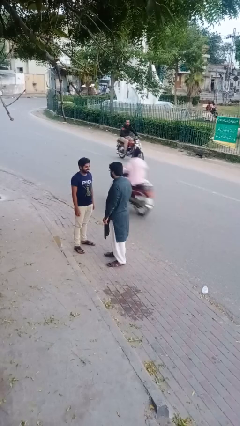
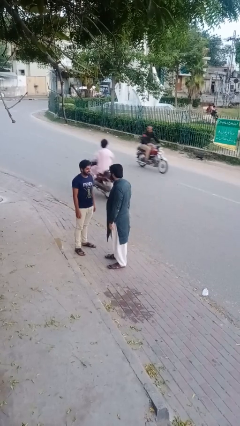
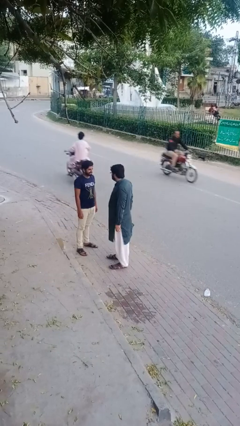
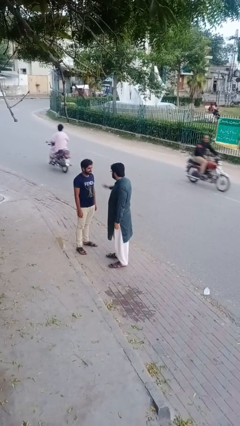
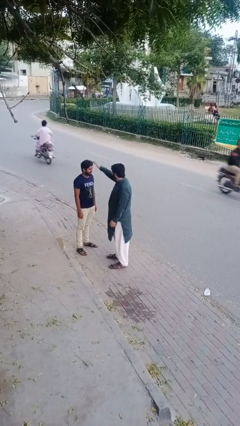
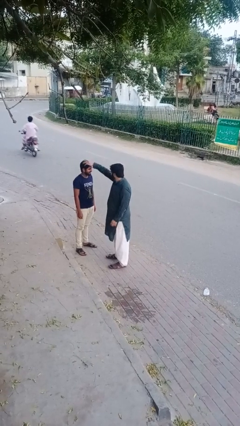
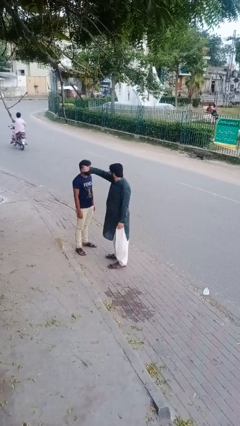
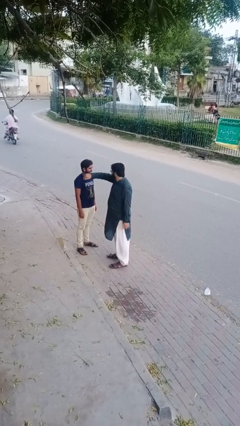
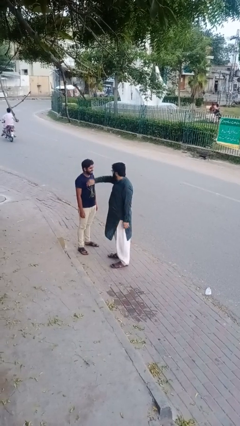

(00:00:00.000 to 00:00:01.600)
person grabs person by hair

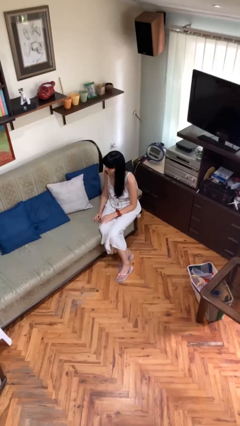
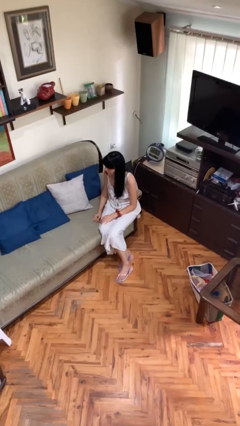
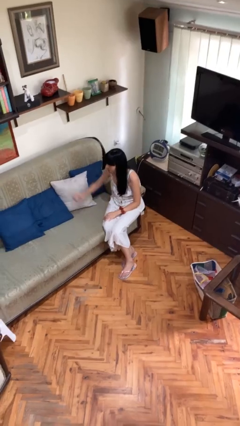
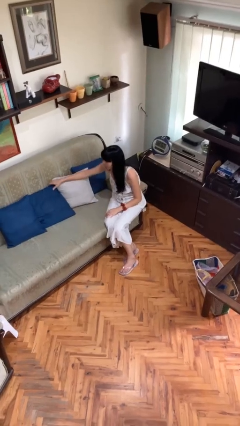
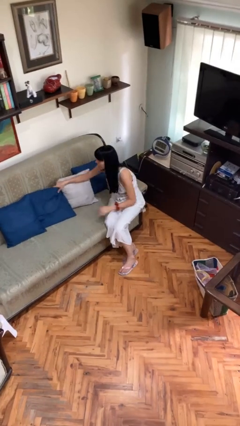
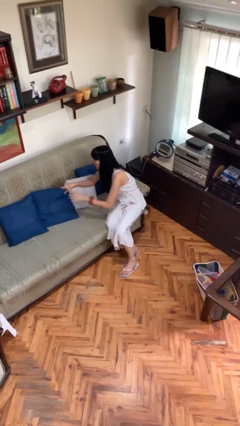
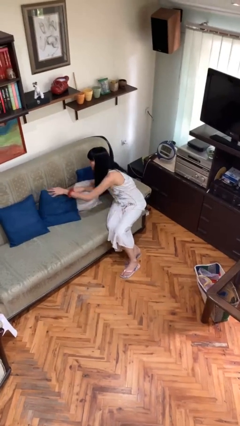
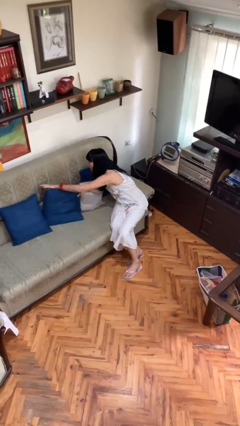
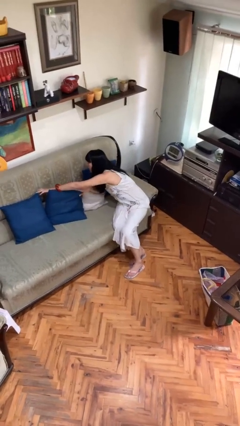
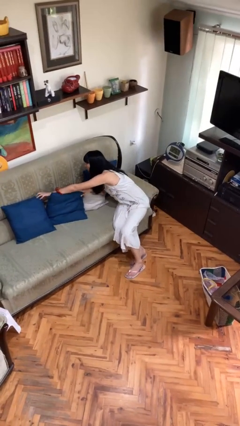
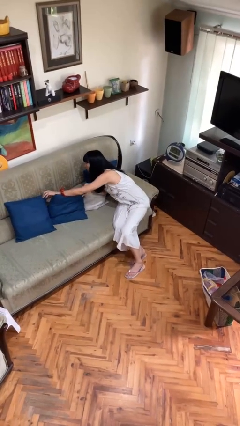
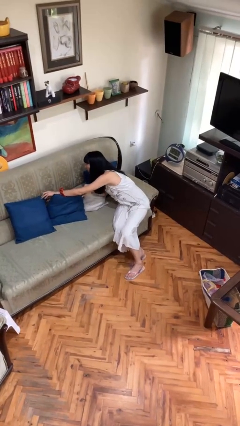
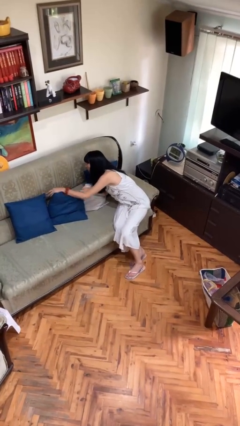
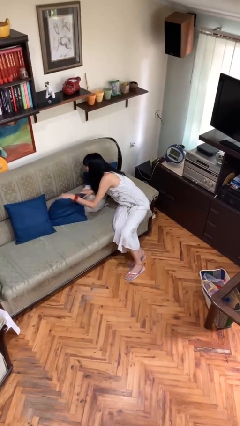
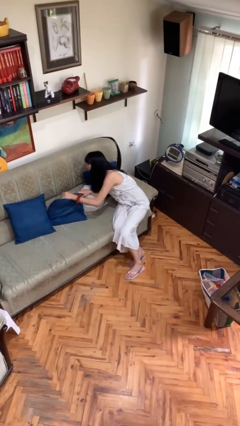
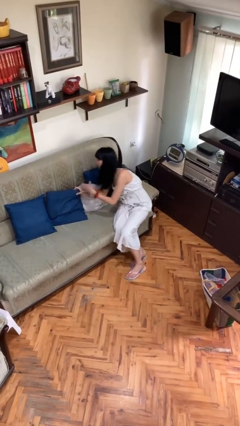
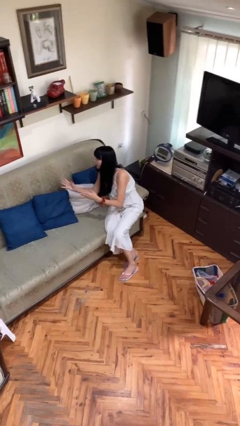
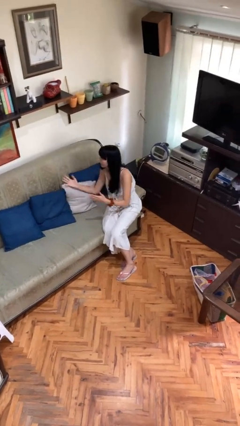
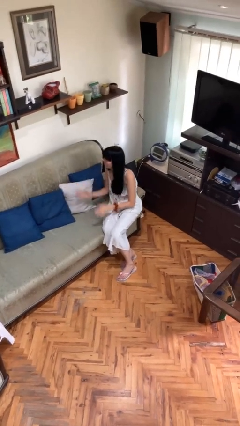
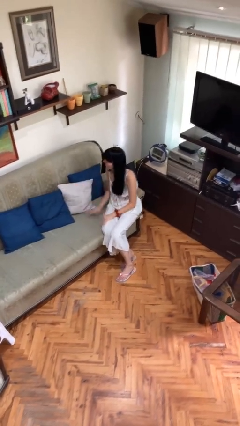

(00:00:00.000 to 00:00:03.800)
person searches in couch

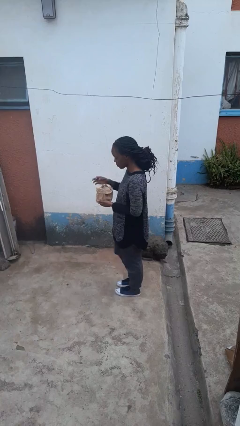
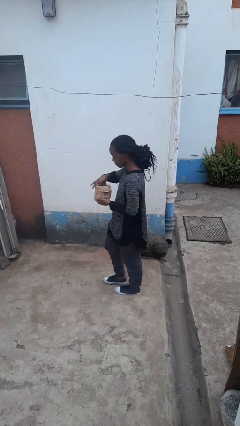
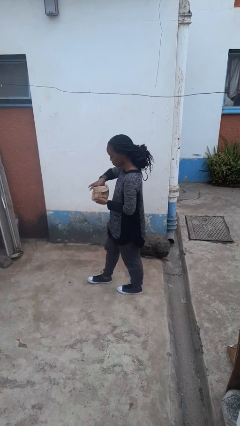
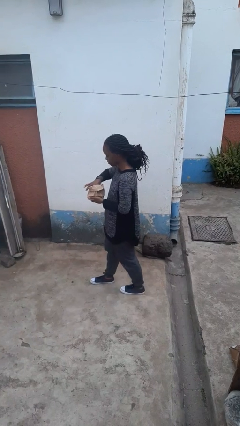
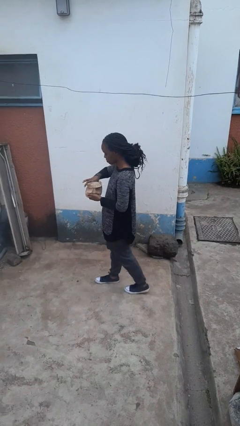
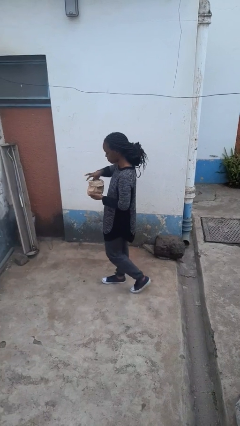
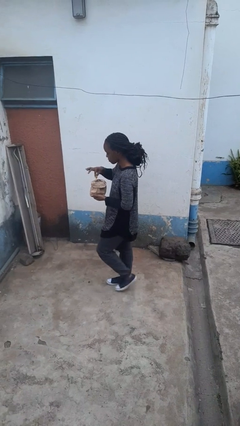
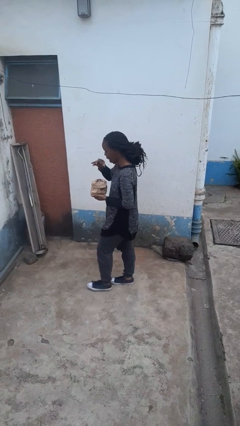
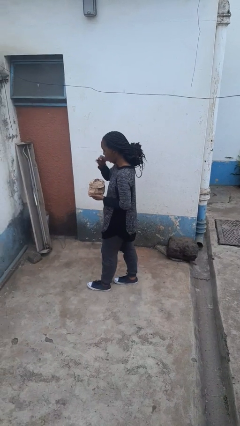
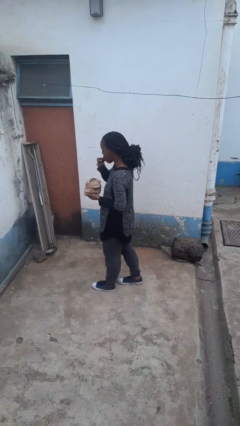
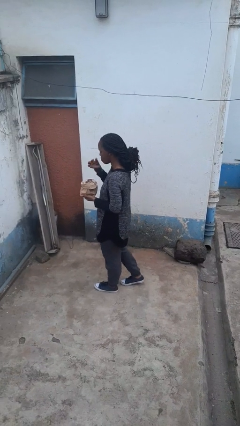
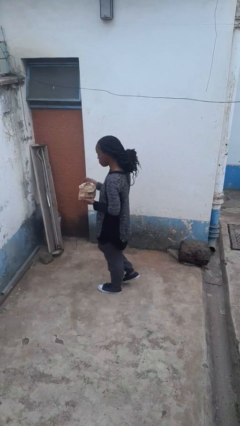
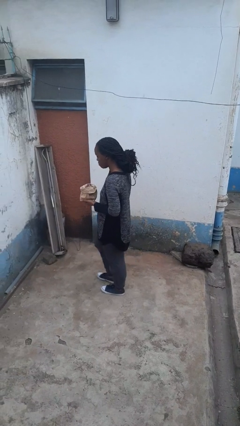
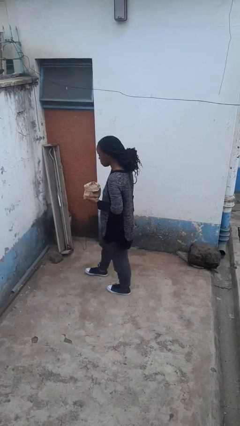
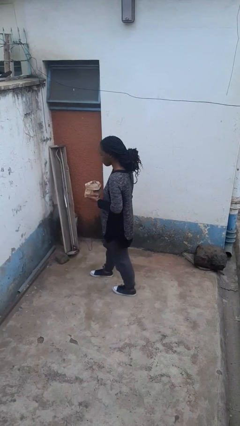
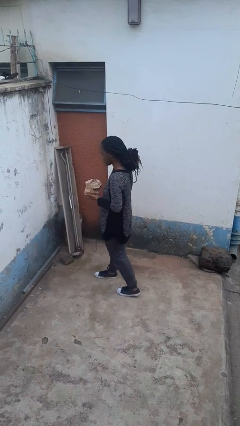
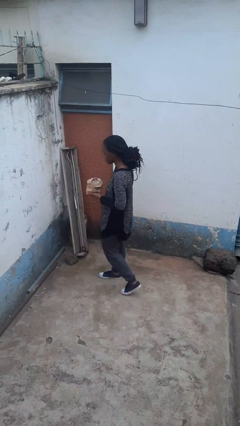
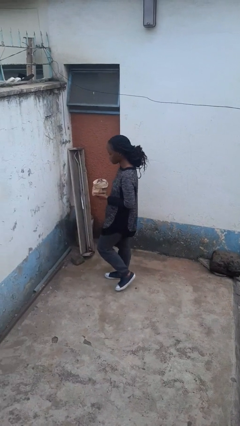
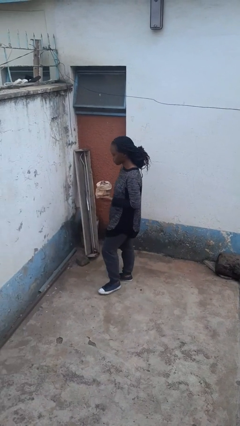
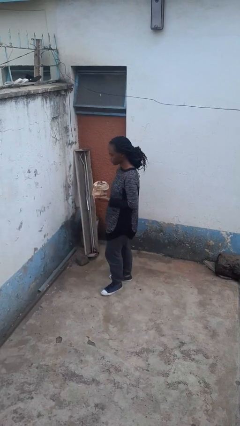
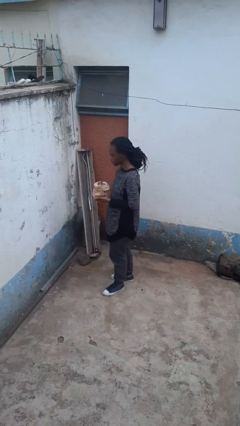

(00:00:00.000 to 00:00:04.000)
person eats snack from bag

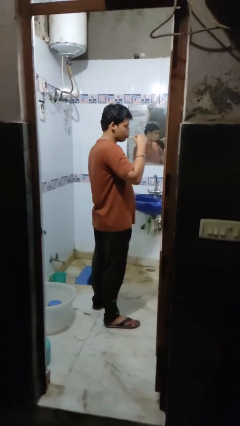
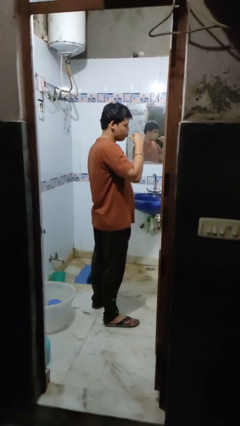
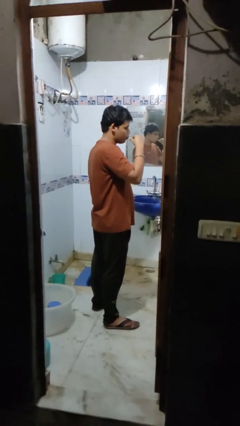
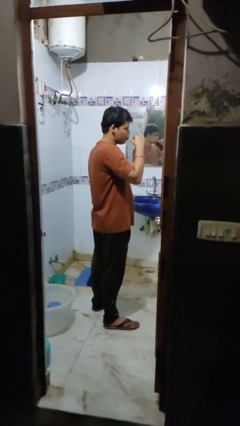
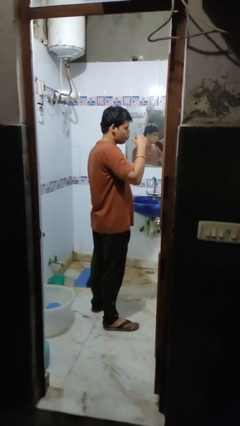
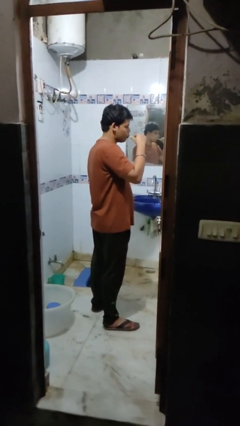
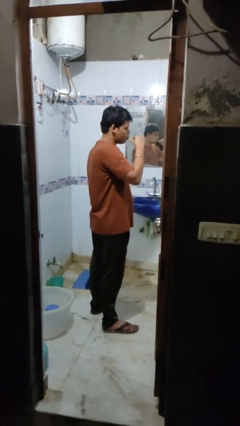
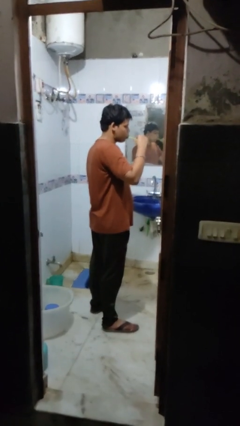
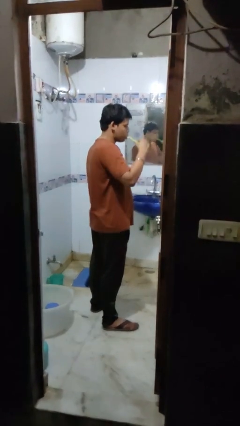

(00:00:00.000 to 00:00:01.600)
person brushes teeth

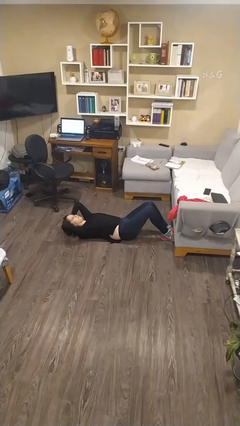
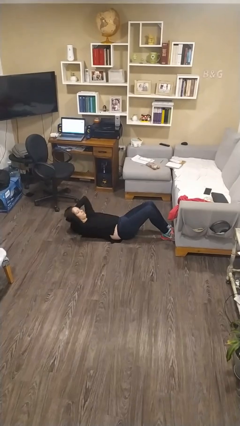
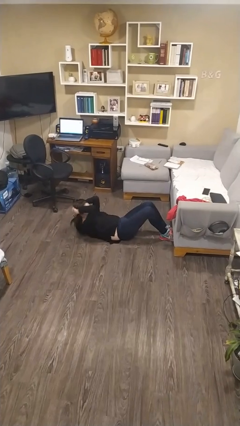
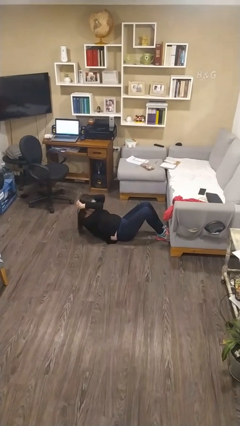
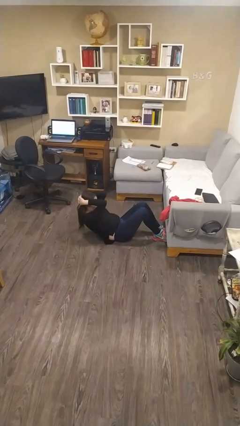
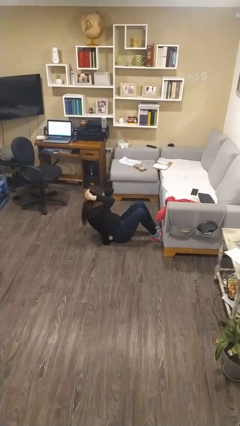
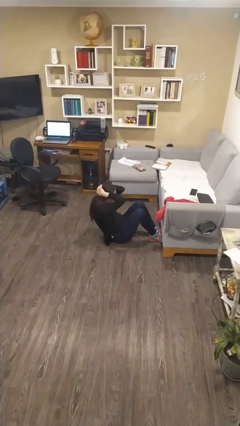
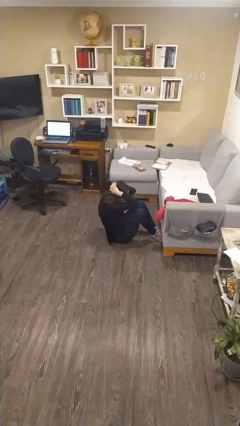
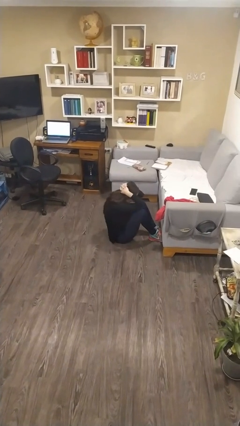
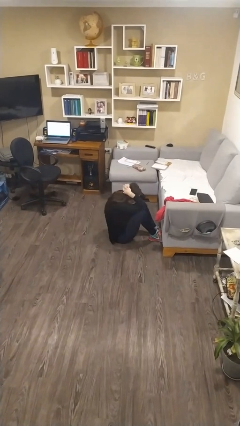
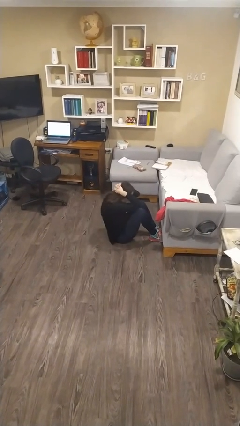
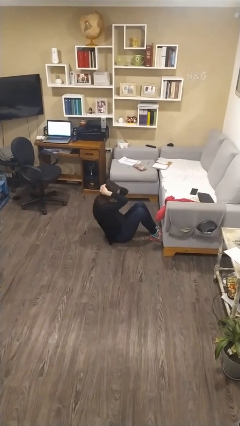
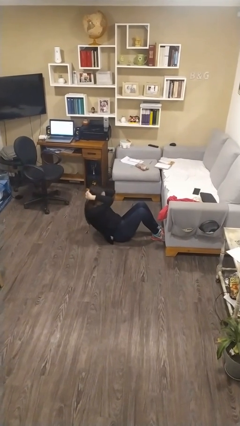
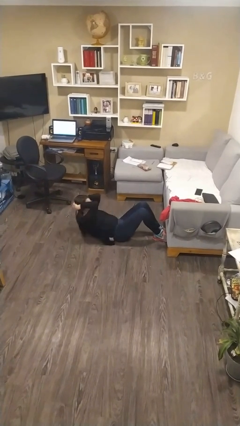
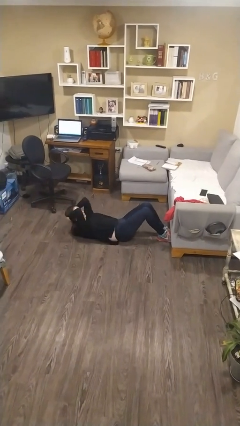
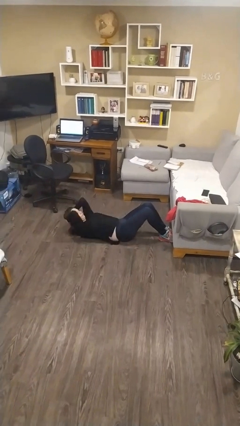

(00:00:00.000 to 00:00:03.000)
person exercises with situp

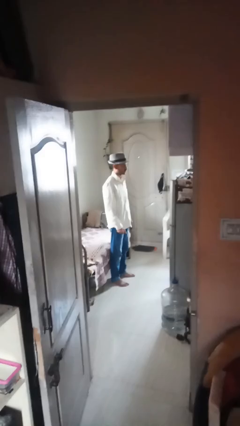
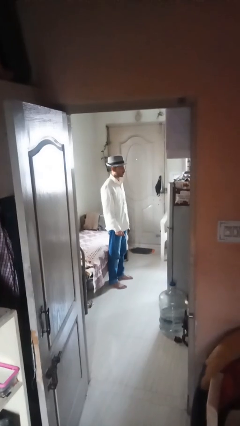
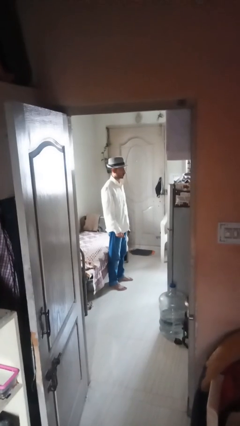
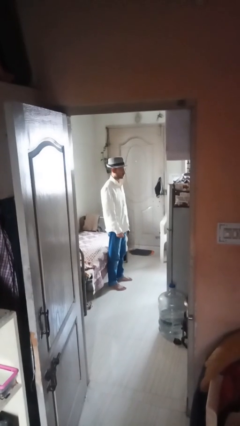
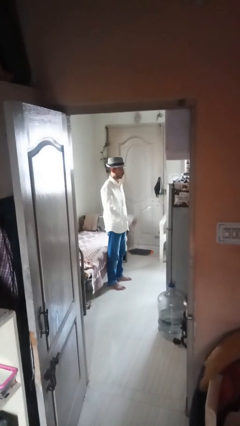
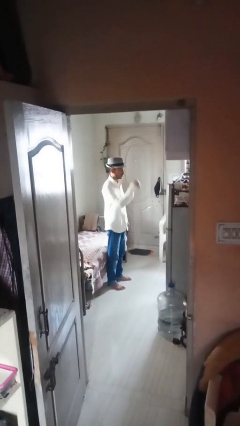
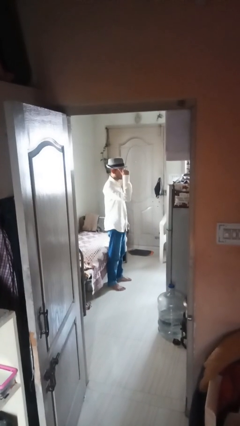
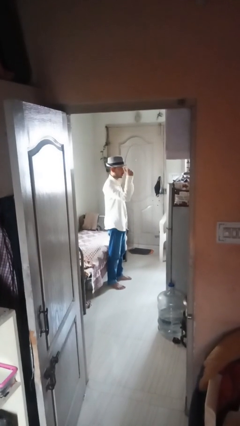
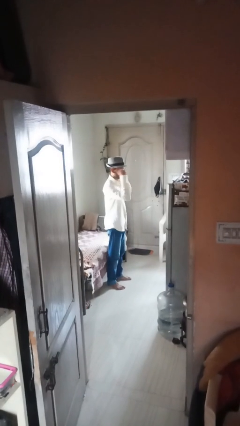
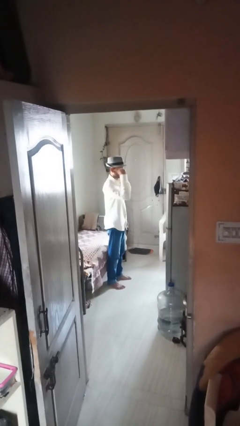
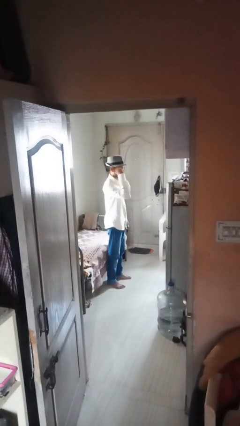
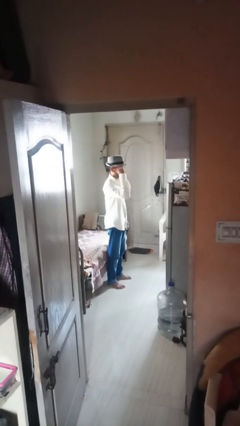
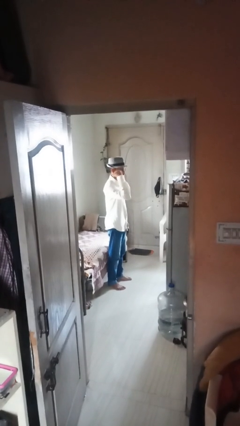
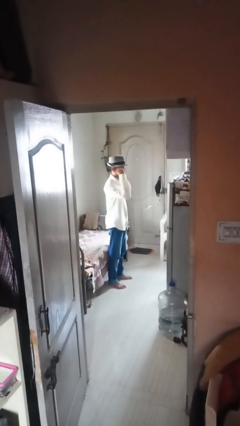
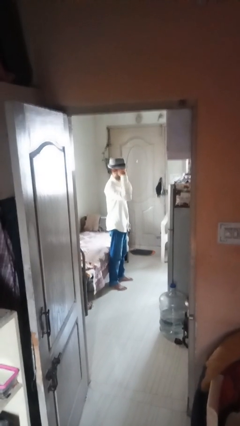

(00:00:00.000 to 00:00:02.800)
person gestures behind me

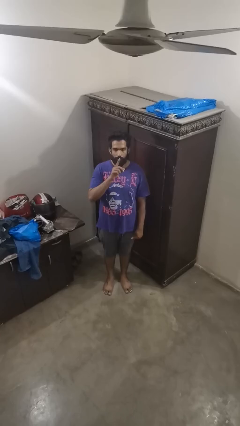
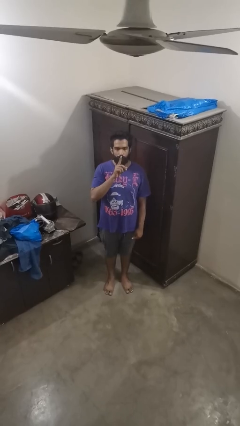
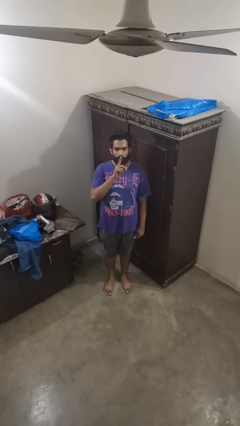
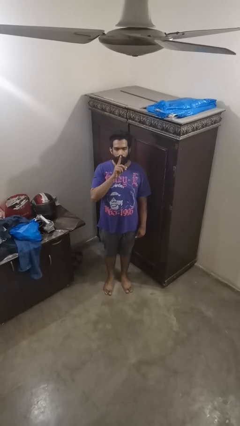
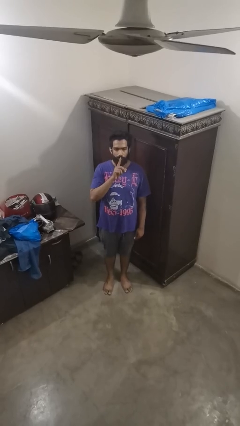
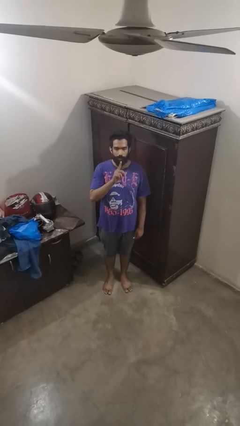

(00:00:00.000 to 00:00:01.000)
person gestures be quiet
